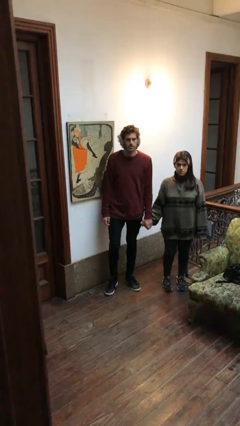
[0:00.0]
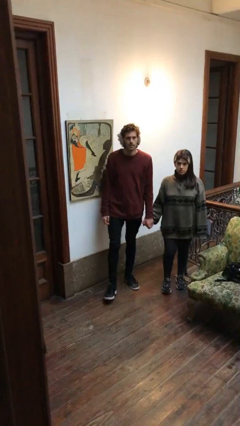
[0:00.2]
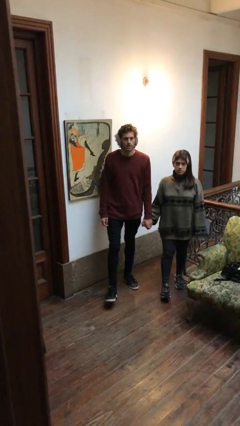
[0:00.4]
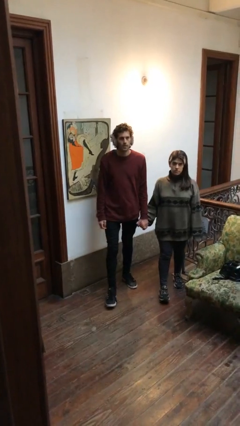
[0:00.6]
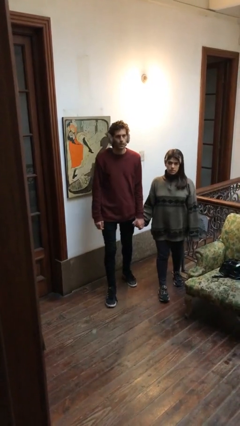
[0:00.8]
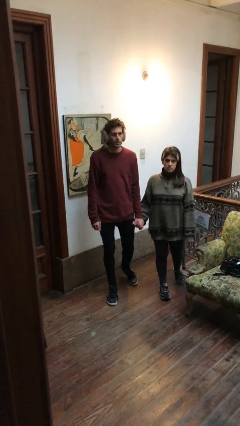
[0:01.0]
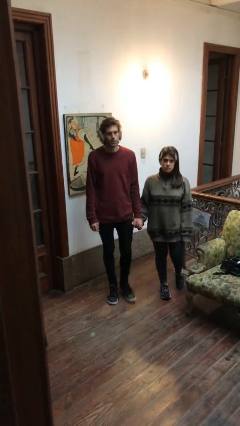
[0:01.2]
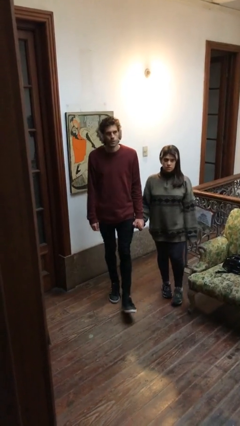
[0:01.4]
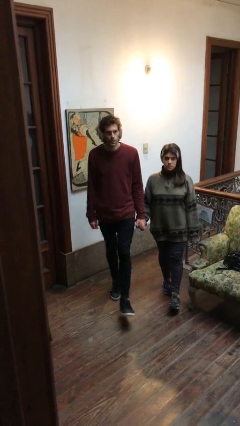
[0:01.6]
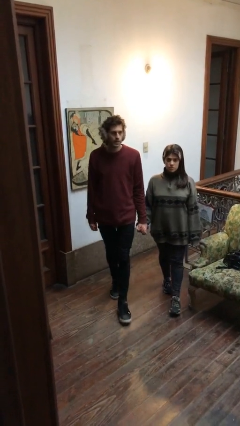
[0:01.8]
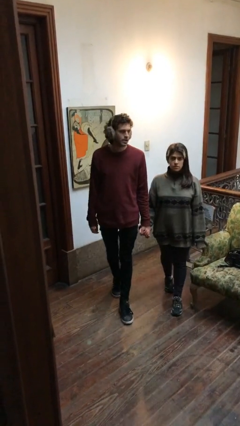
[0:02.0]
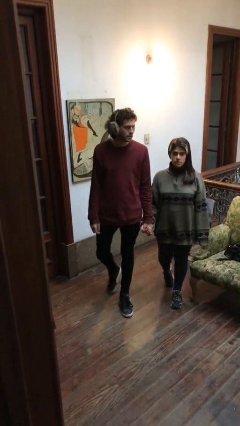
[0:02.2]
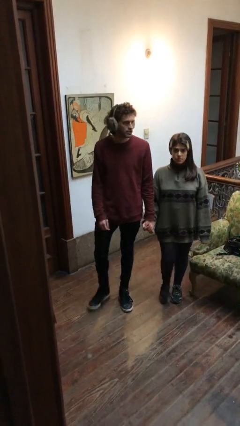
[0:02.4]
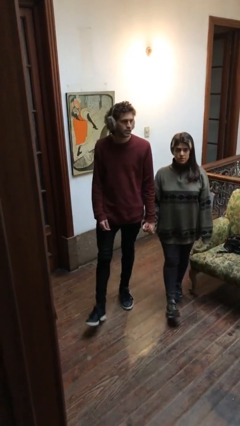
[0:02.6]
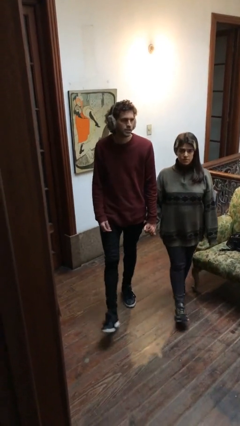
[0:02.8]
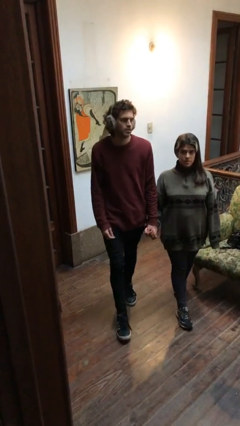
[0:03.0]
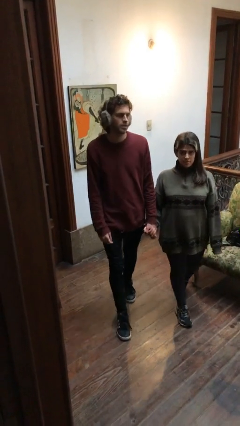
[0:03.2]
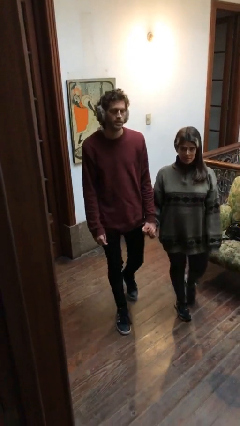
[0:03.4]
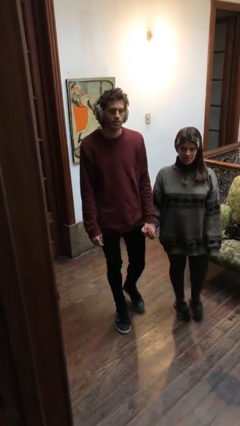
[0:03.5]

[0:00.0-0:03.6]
person holds hand

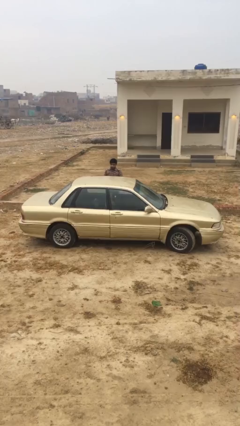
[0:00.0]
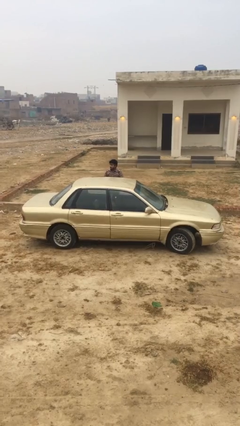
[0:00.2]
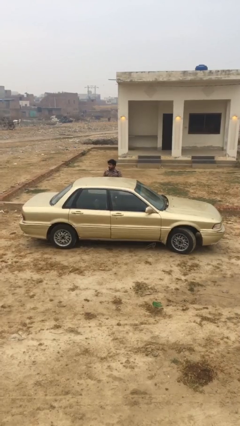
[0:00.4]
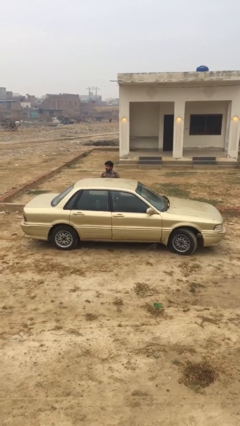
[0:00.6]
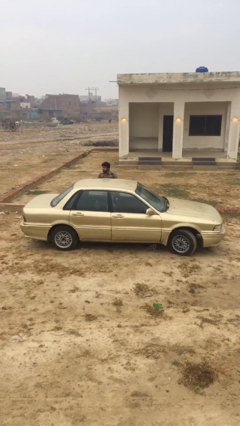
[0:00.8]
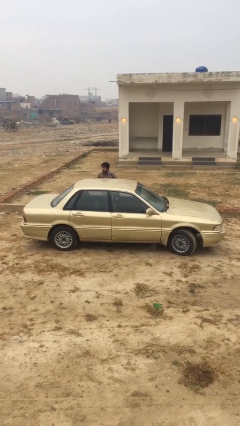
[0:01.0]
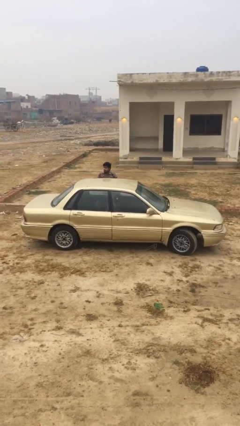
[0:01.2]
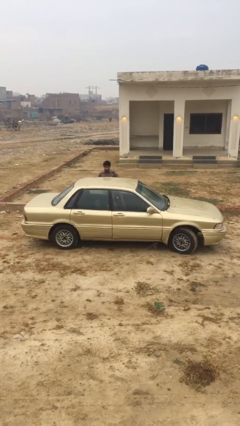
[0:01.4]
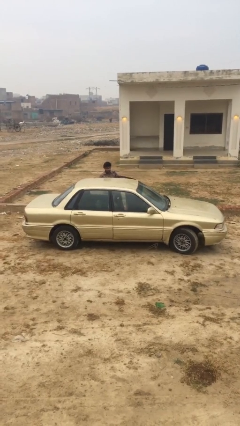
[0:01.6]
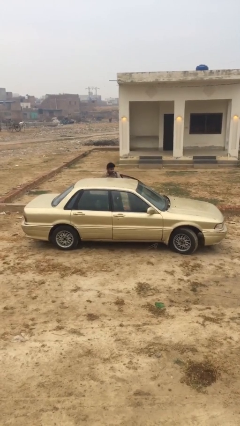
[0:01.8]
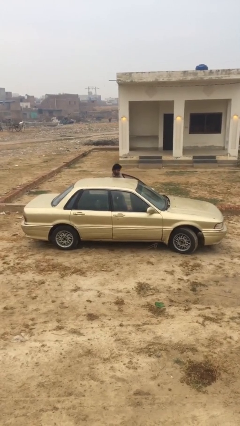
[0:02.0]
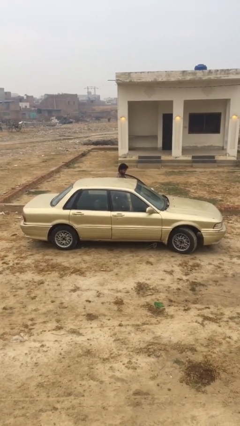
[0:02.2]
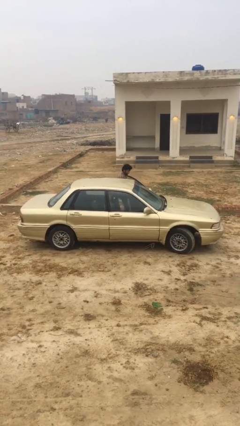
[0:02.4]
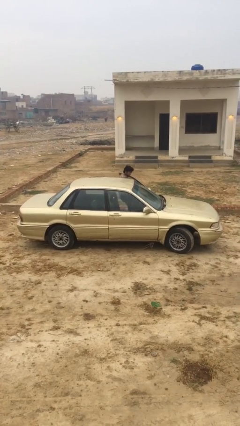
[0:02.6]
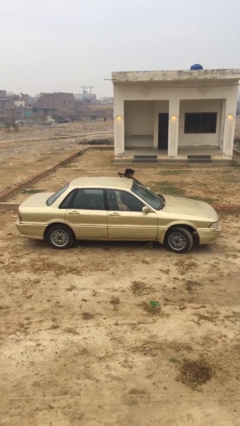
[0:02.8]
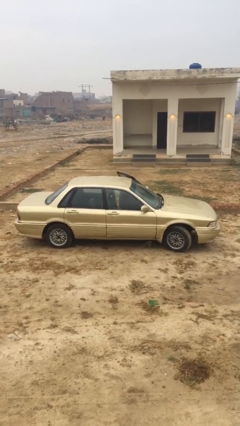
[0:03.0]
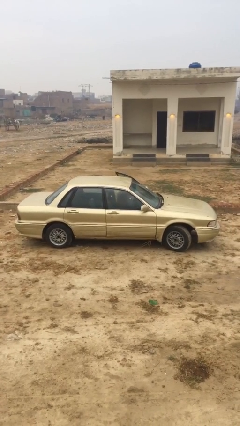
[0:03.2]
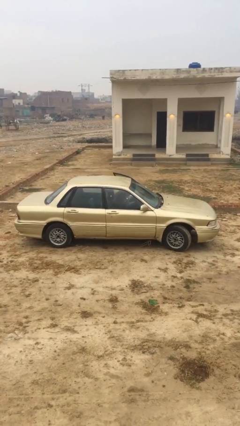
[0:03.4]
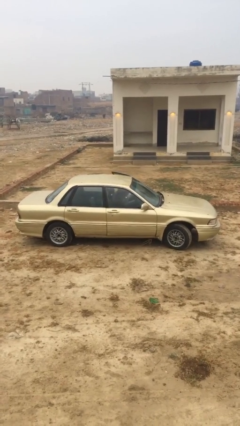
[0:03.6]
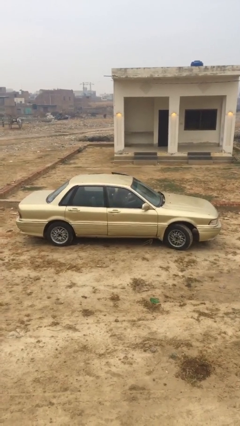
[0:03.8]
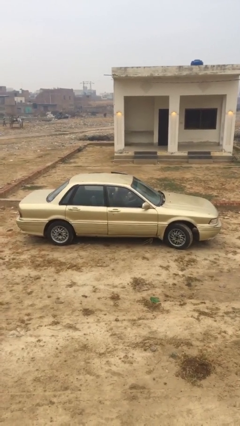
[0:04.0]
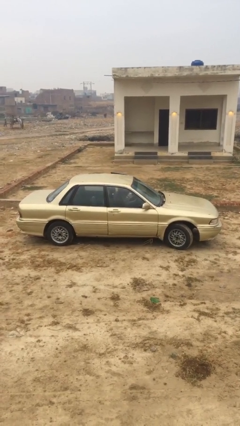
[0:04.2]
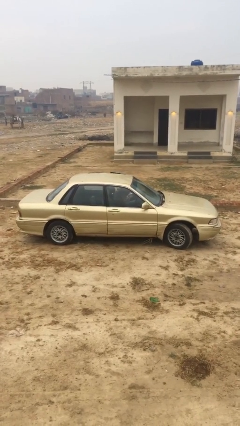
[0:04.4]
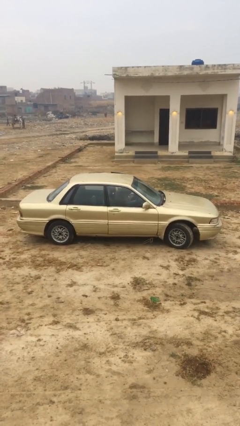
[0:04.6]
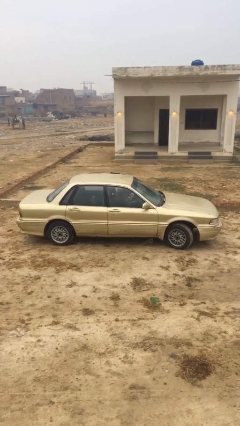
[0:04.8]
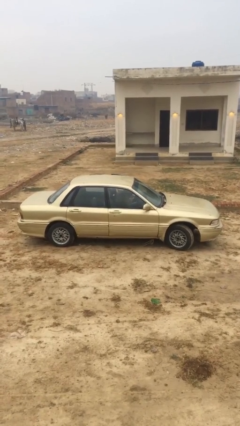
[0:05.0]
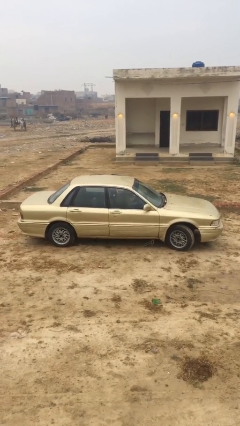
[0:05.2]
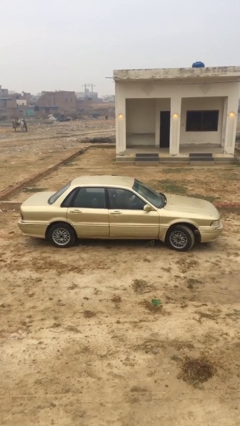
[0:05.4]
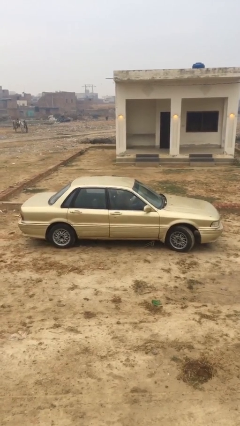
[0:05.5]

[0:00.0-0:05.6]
car picks up person

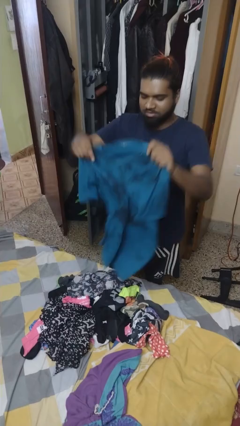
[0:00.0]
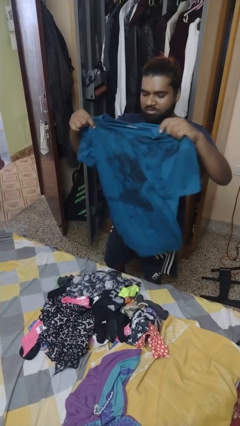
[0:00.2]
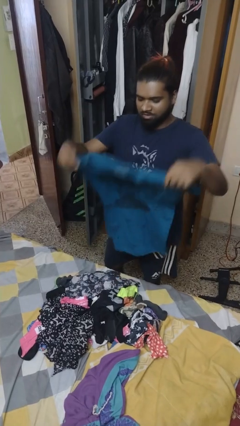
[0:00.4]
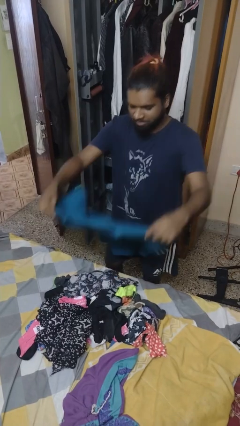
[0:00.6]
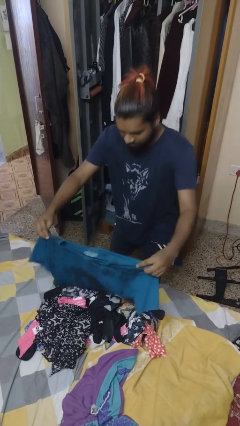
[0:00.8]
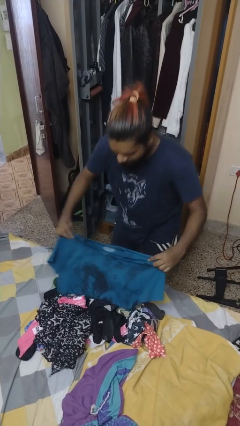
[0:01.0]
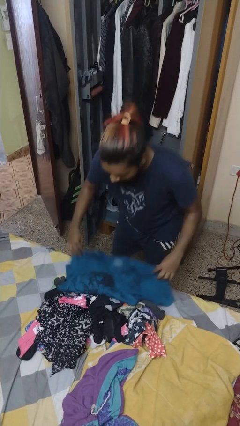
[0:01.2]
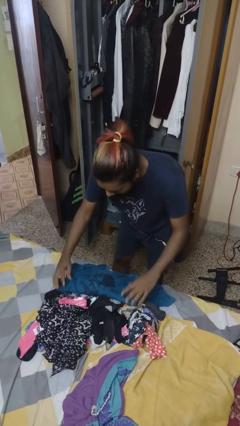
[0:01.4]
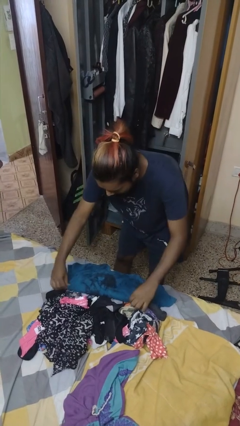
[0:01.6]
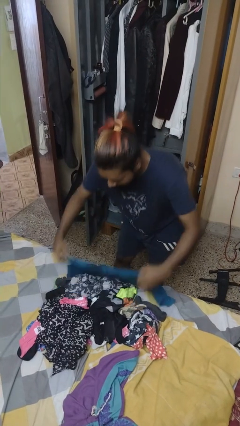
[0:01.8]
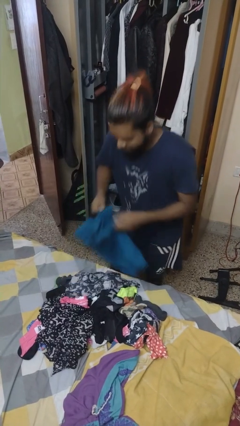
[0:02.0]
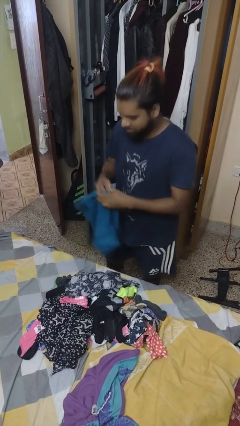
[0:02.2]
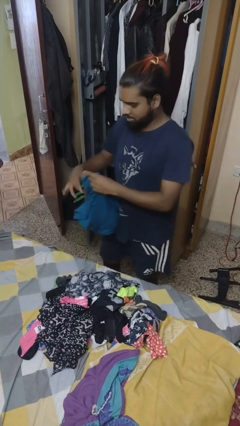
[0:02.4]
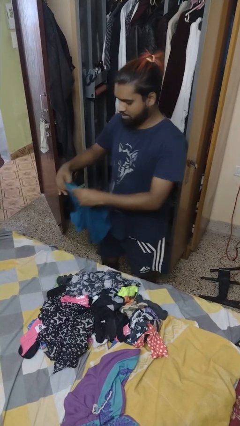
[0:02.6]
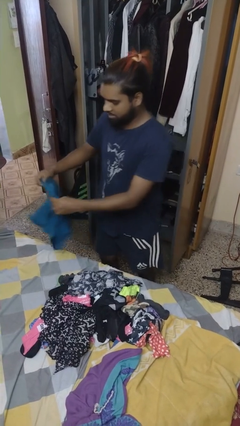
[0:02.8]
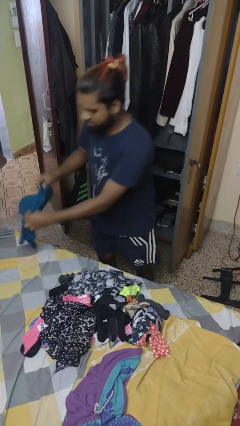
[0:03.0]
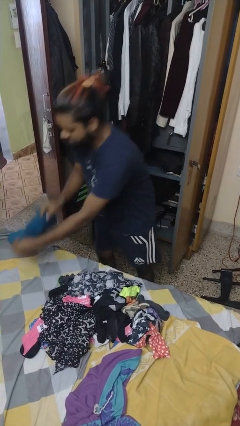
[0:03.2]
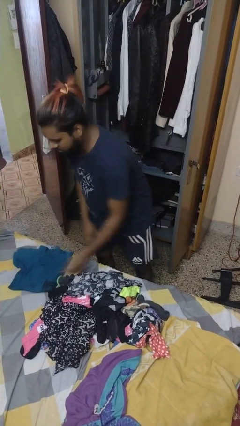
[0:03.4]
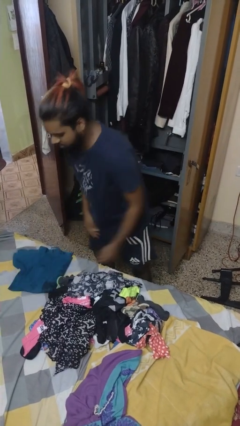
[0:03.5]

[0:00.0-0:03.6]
person folds shirt

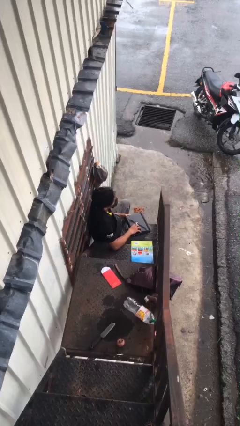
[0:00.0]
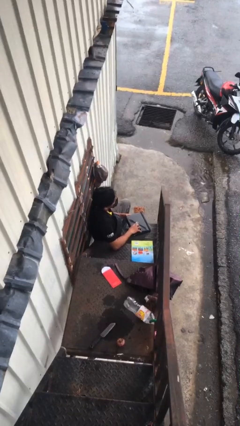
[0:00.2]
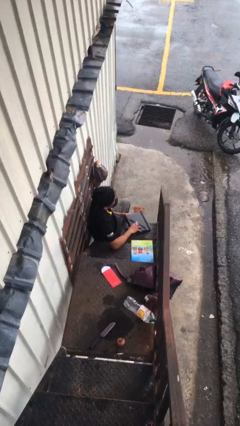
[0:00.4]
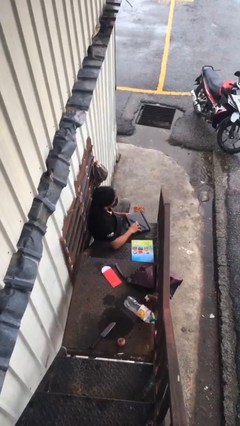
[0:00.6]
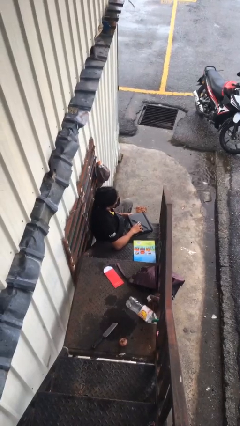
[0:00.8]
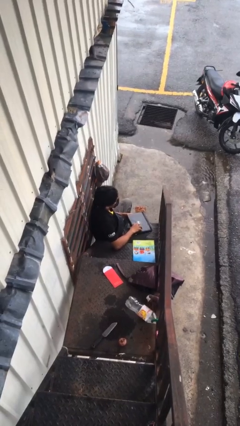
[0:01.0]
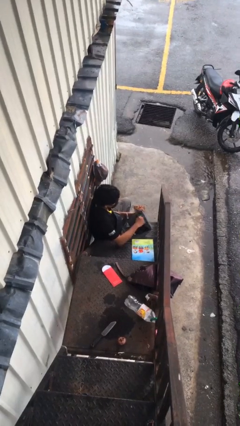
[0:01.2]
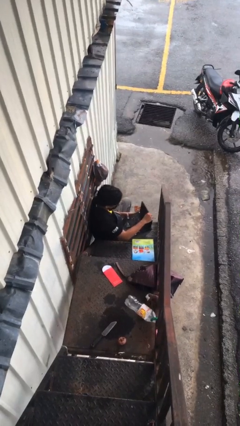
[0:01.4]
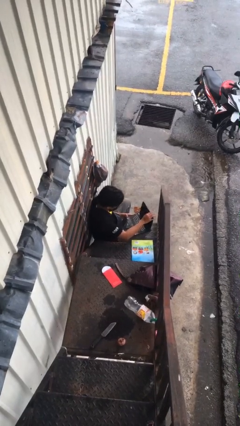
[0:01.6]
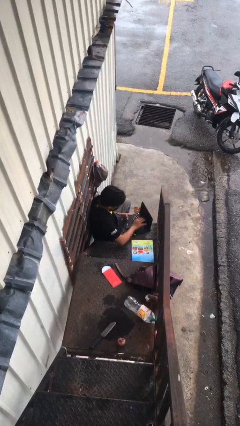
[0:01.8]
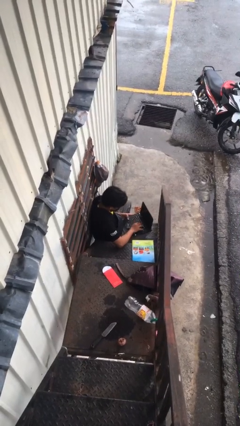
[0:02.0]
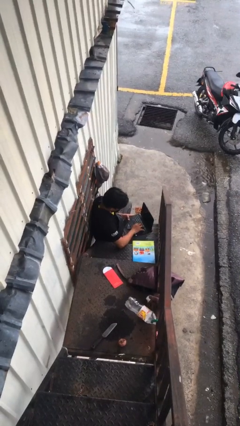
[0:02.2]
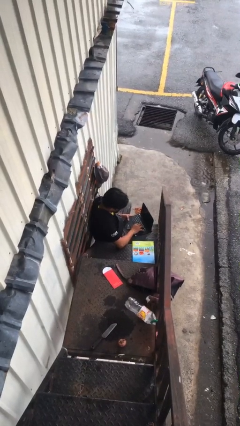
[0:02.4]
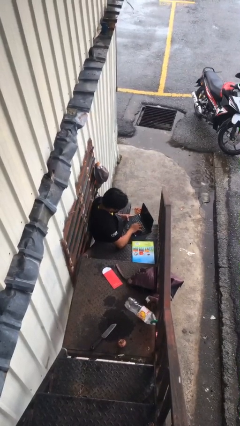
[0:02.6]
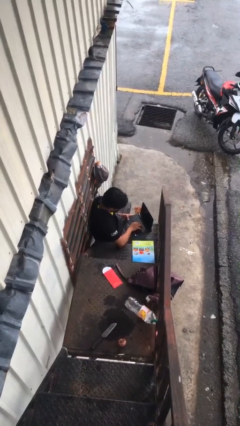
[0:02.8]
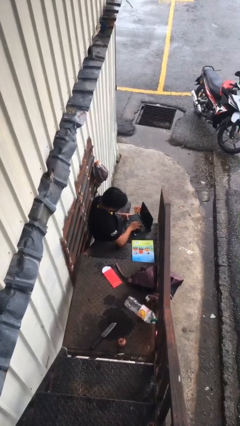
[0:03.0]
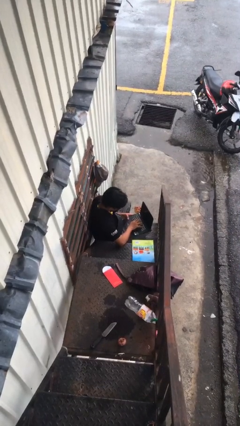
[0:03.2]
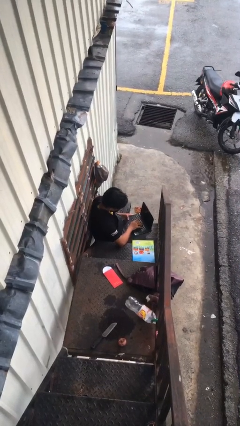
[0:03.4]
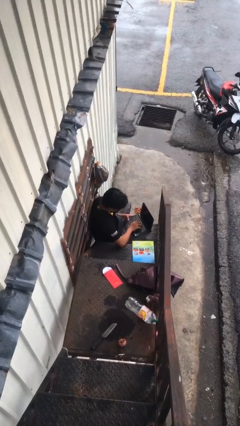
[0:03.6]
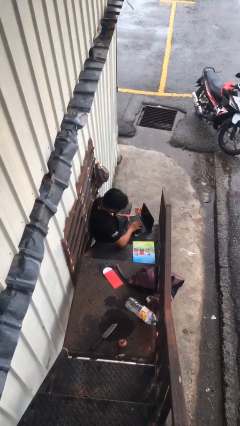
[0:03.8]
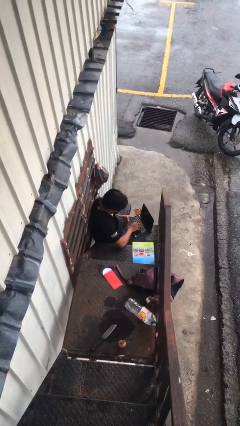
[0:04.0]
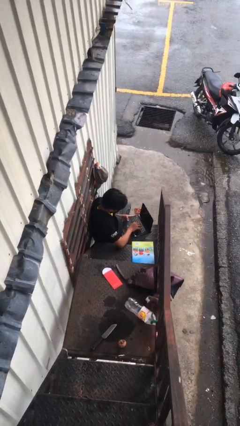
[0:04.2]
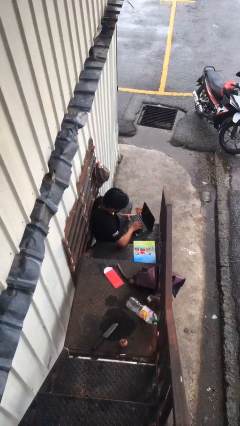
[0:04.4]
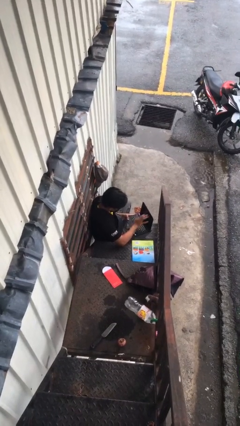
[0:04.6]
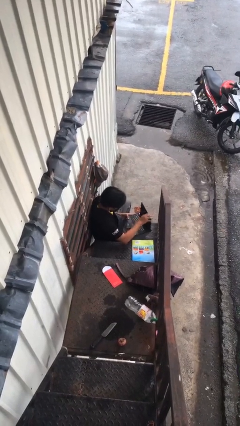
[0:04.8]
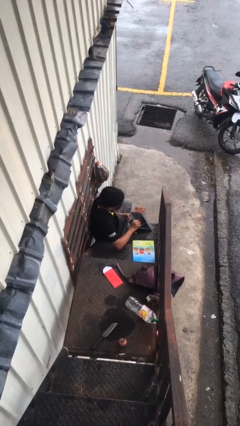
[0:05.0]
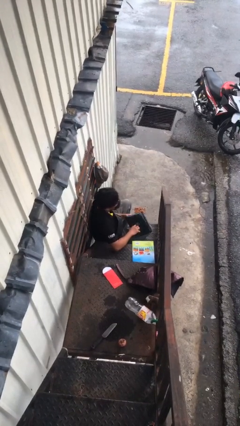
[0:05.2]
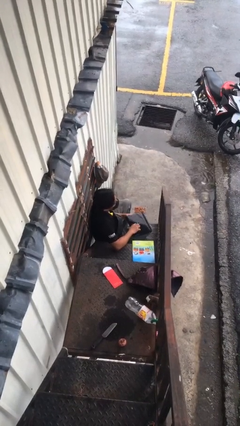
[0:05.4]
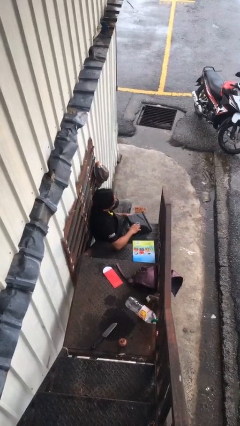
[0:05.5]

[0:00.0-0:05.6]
person interacts with laptop
